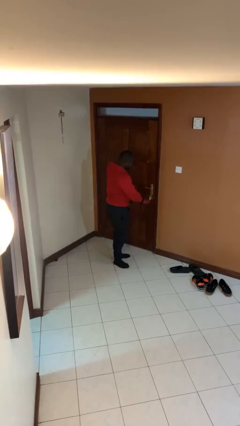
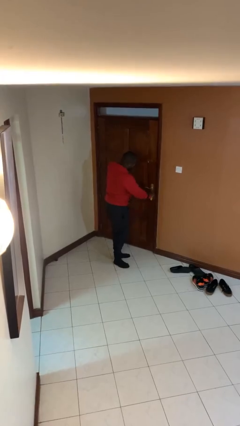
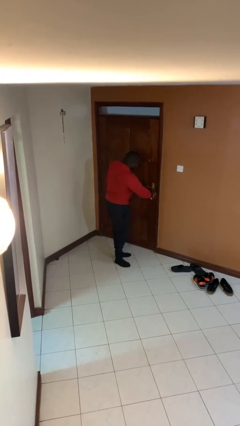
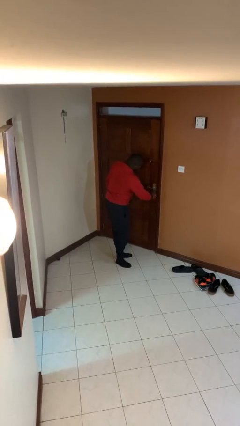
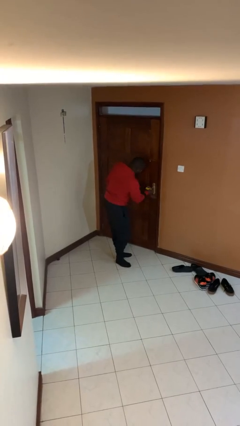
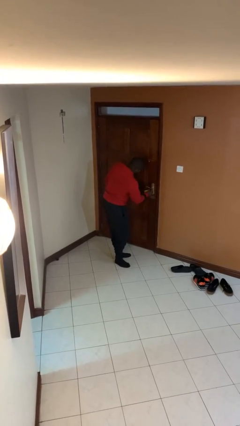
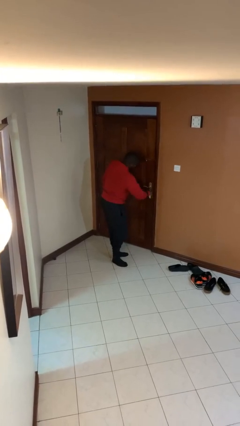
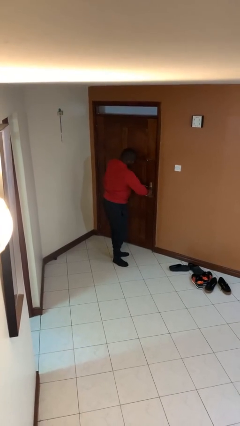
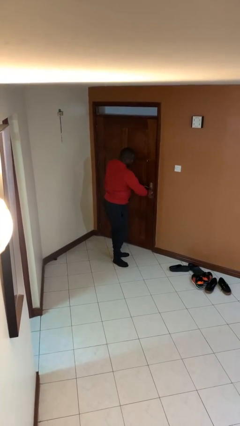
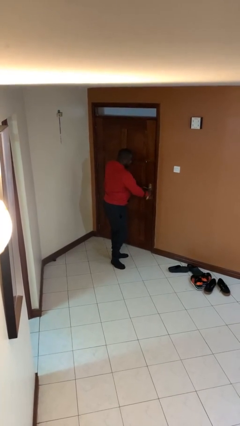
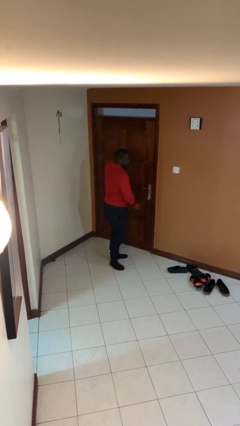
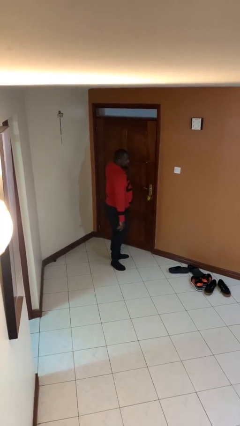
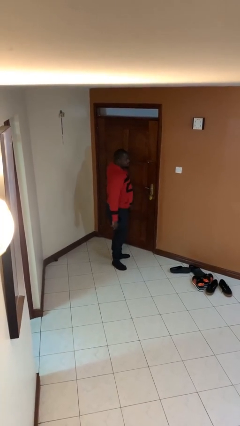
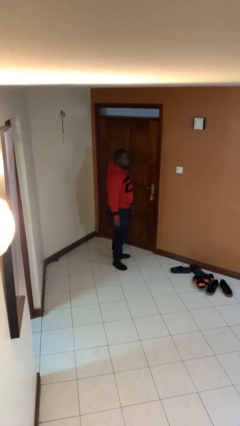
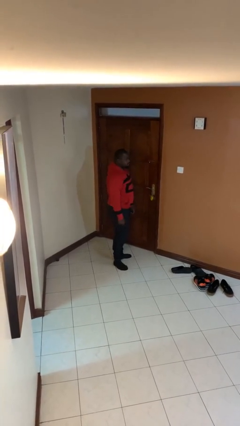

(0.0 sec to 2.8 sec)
person locks door with keys

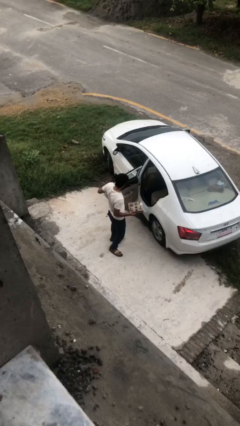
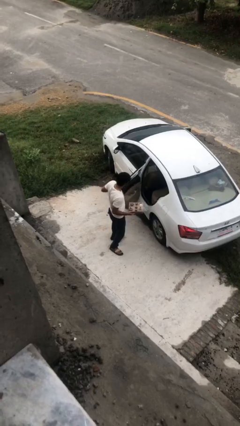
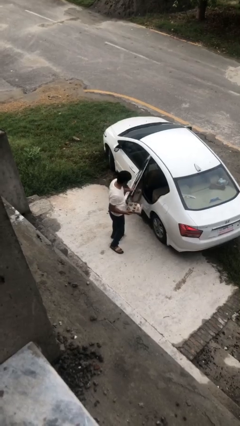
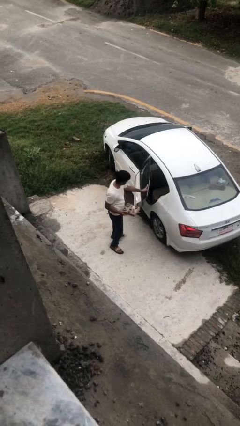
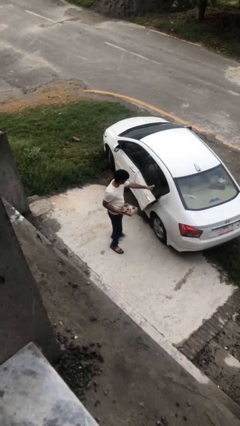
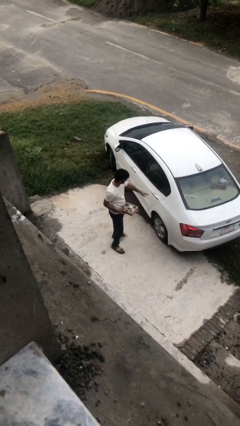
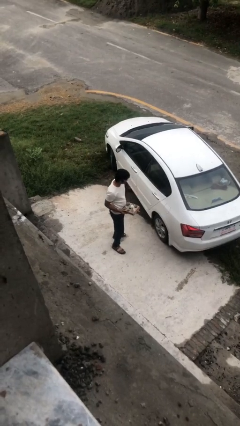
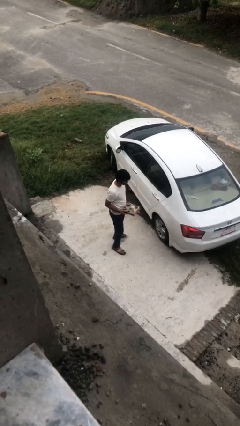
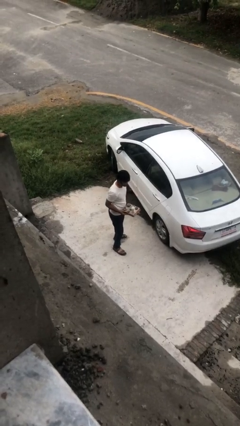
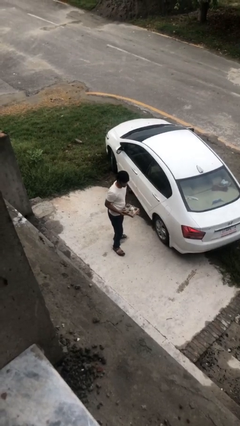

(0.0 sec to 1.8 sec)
person closes car door

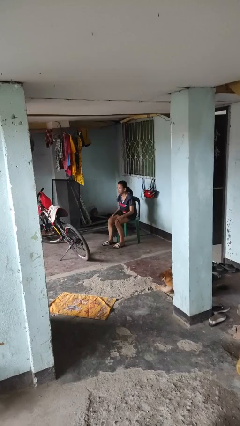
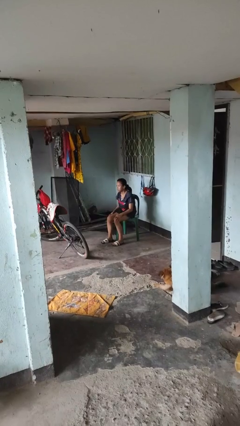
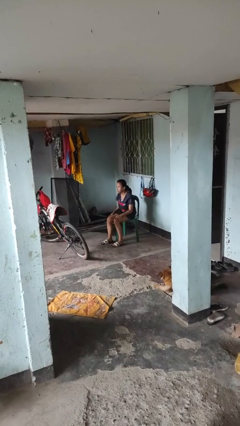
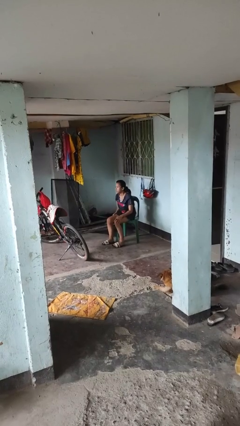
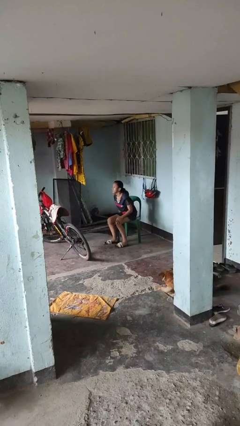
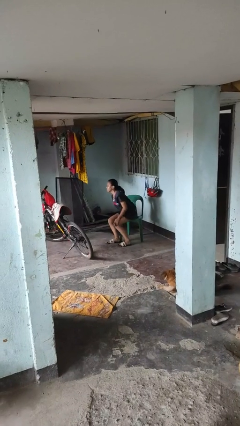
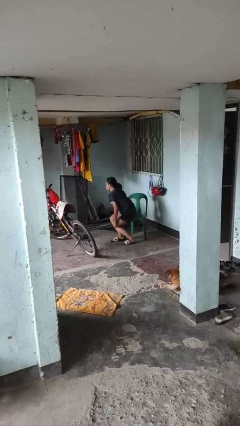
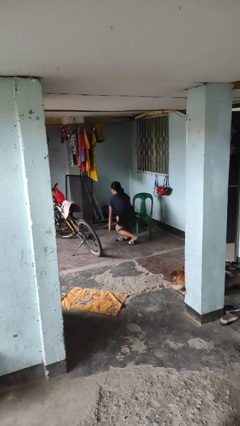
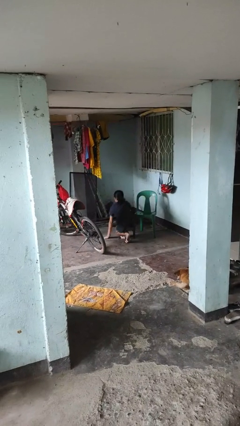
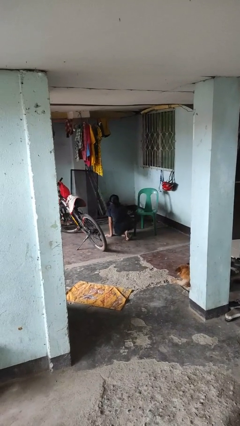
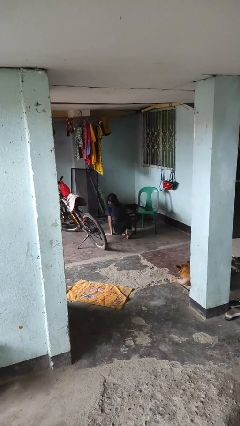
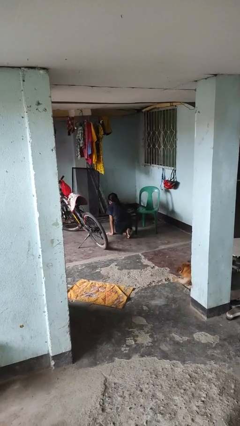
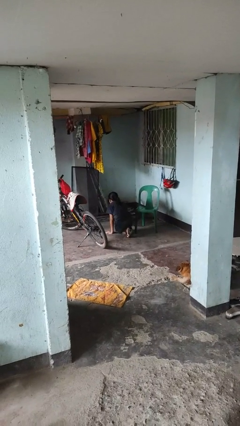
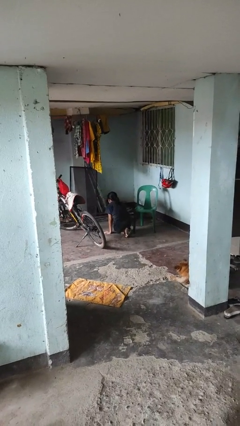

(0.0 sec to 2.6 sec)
person falls from chair

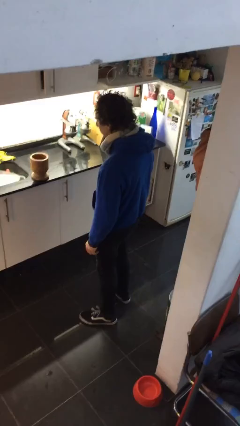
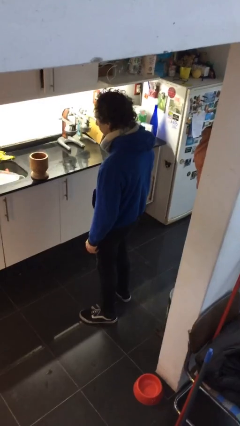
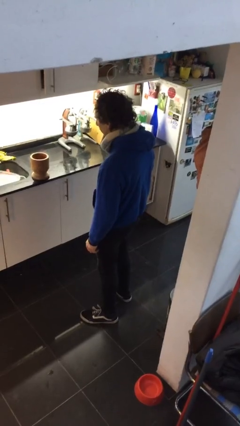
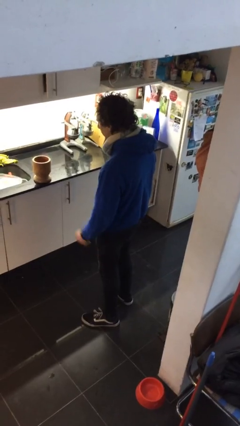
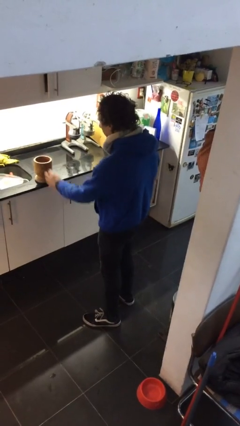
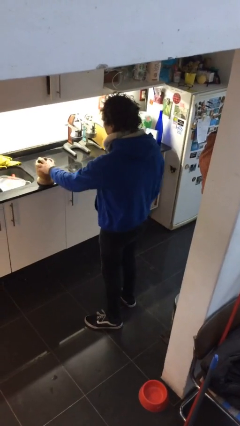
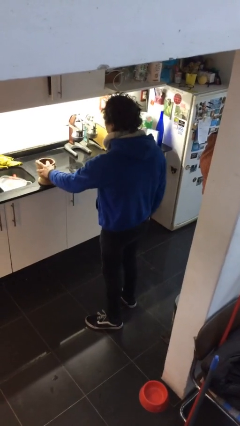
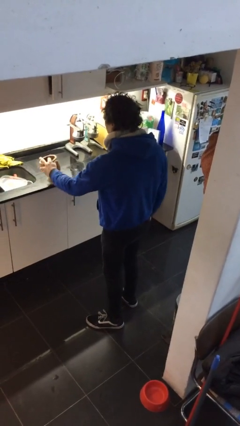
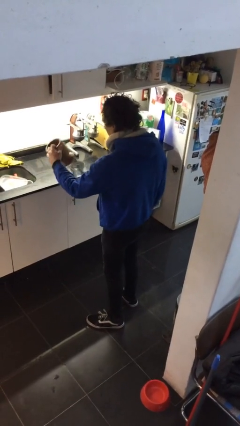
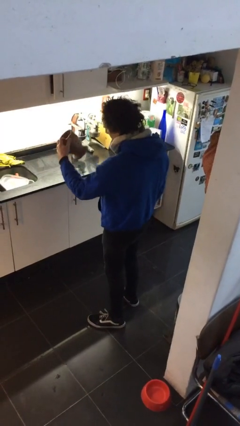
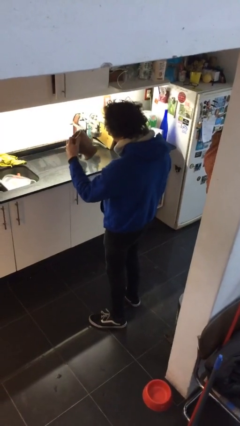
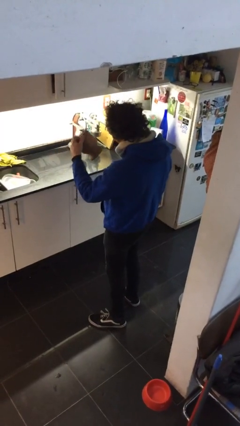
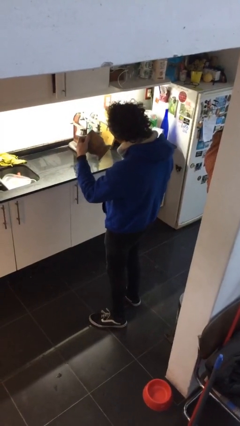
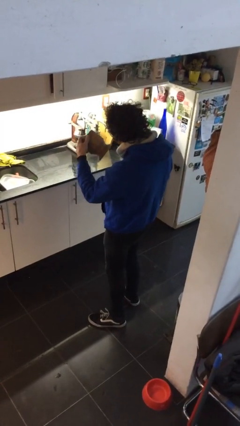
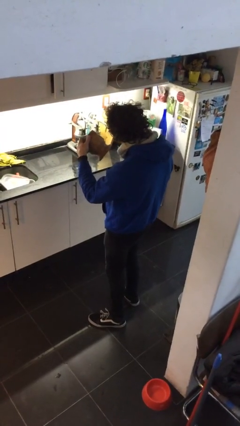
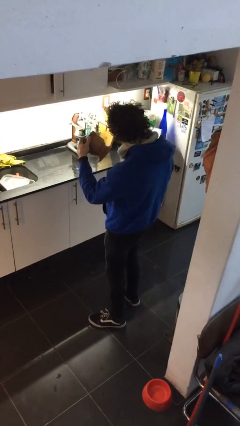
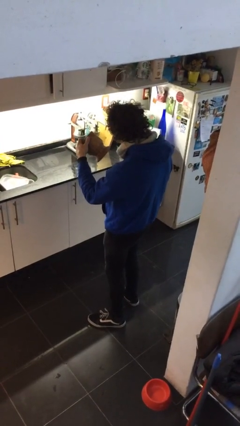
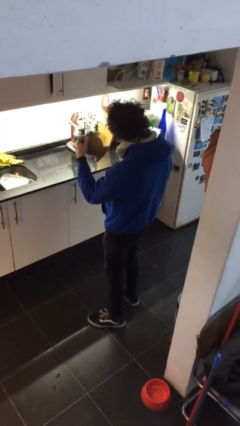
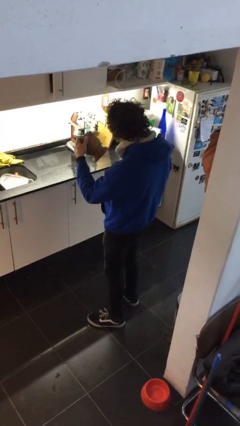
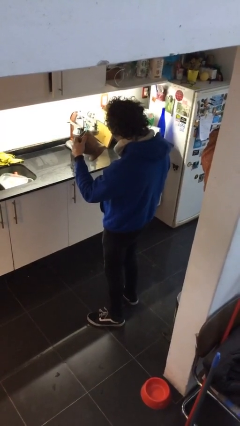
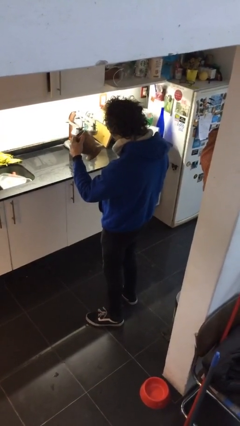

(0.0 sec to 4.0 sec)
person picks up object from countertop

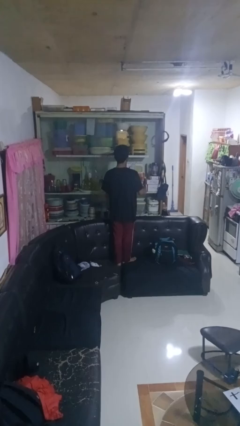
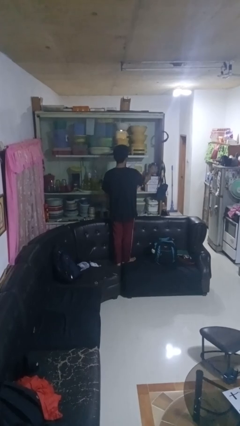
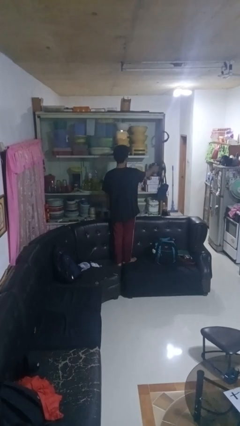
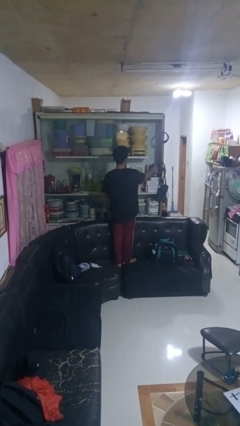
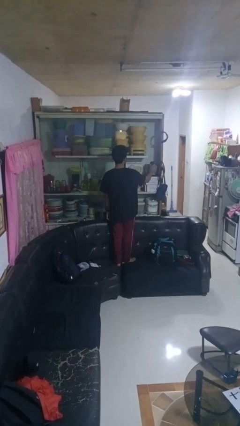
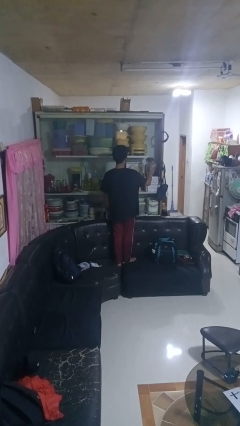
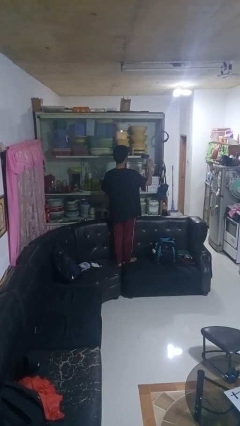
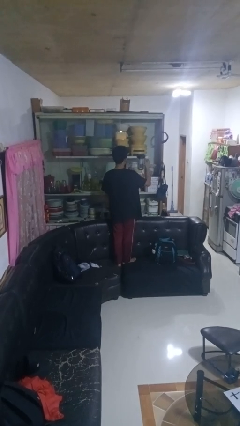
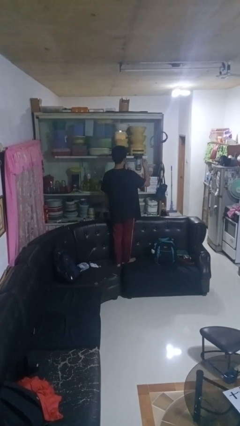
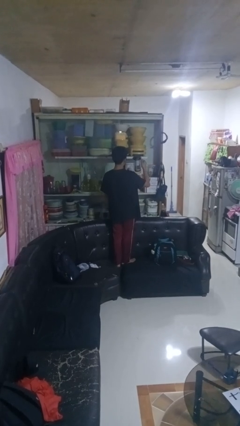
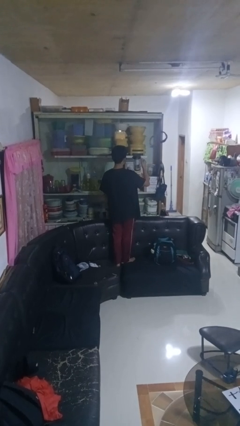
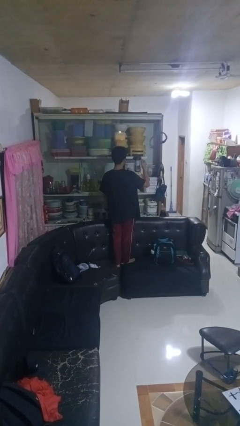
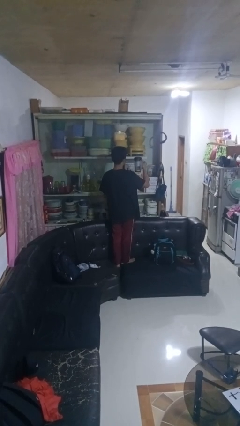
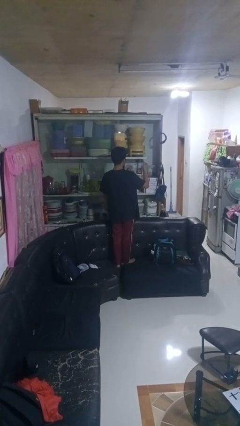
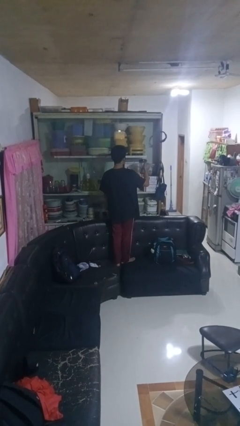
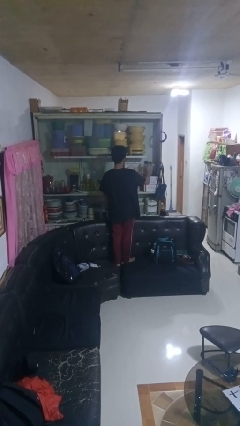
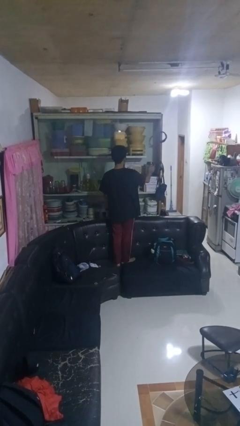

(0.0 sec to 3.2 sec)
person picks up object from cabinet

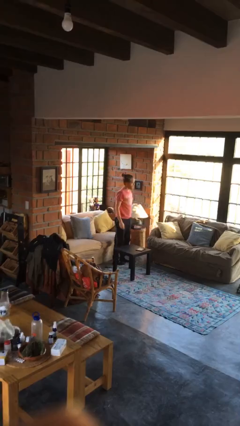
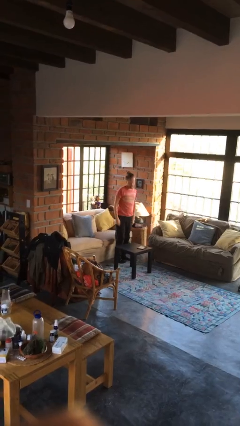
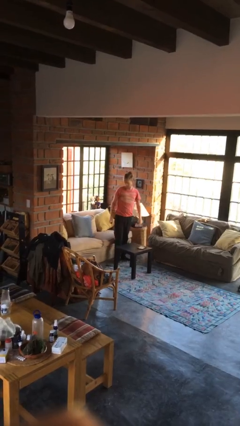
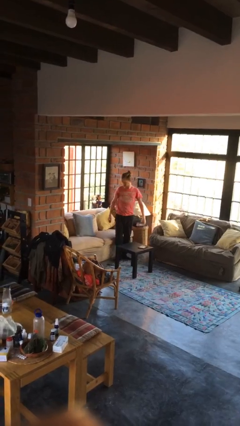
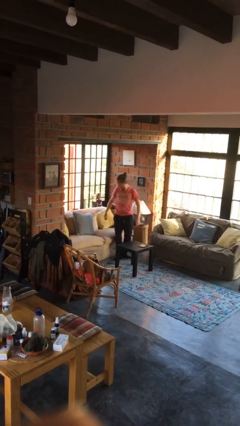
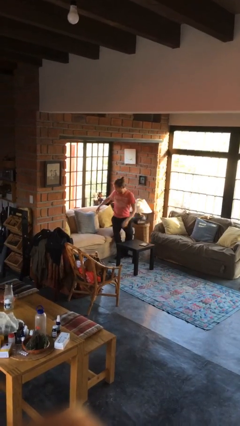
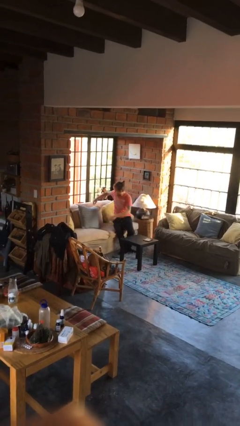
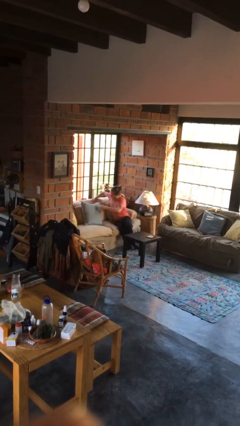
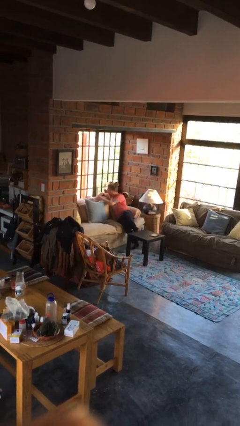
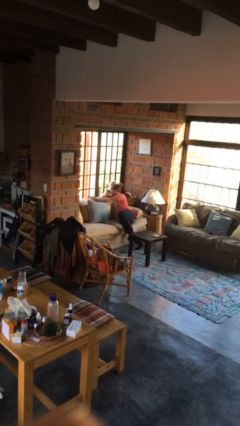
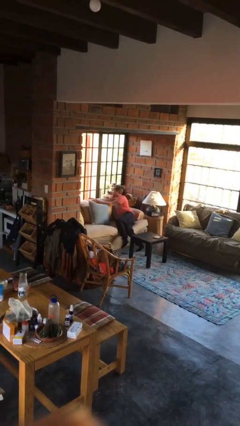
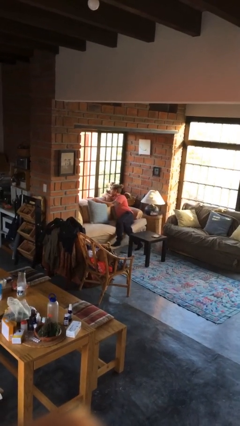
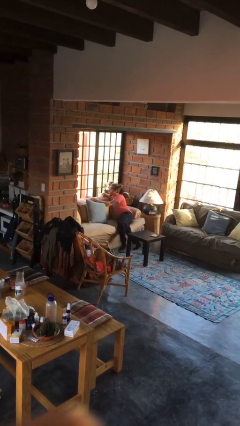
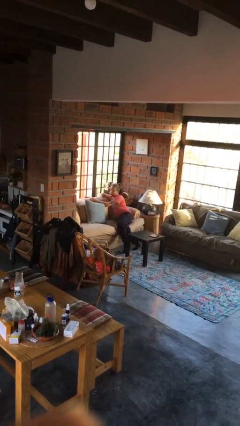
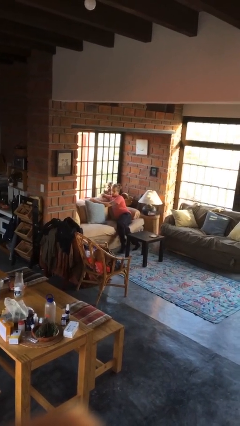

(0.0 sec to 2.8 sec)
person lies down on couch

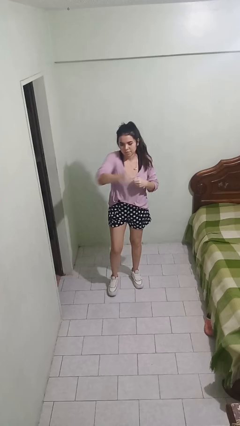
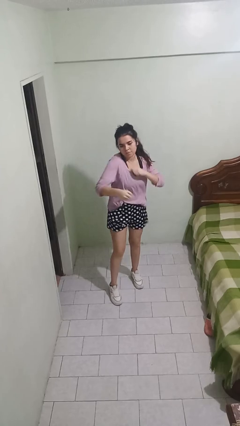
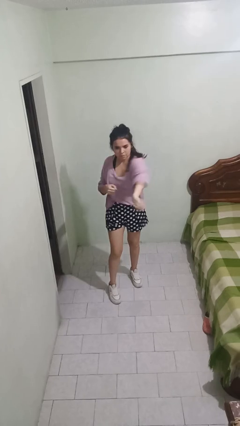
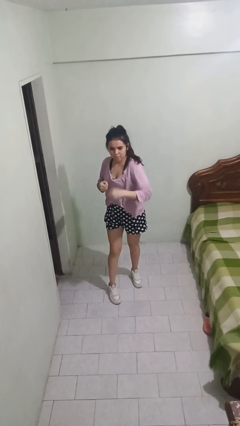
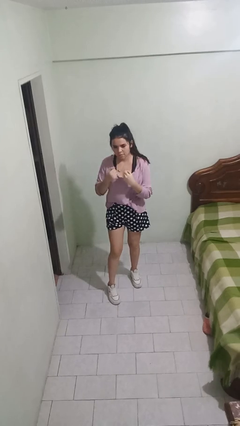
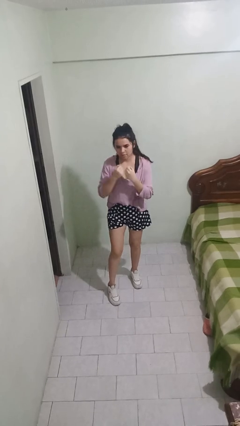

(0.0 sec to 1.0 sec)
person karate chop
